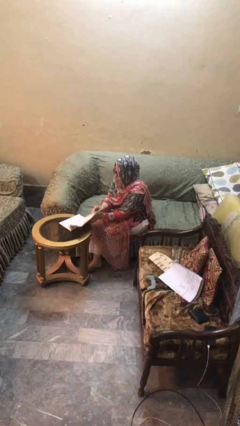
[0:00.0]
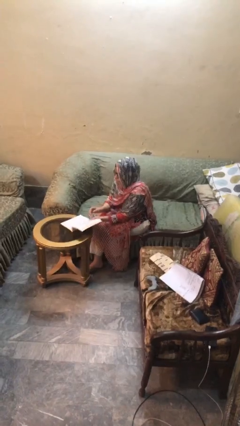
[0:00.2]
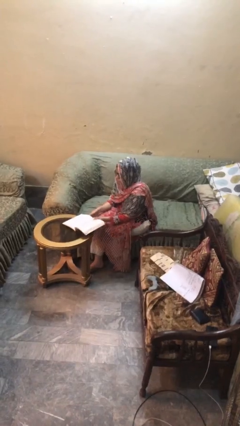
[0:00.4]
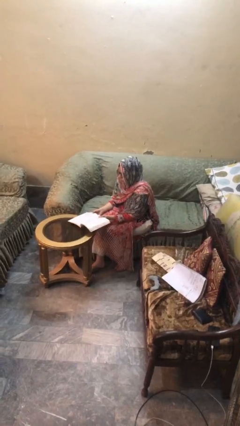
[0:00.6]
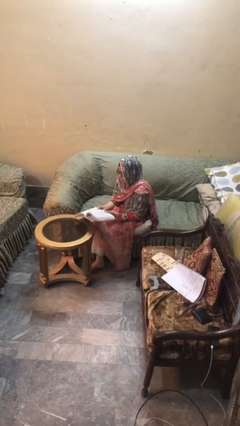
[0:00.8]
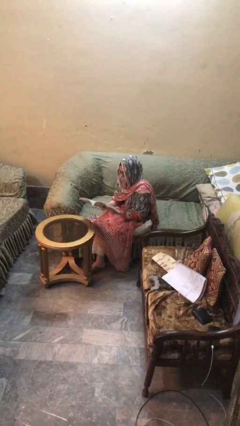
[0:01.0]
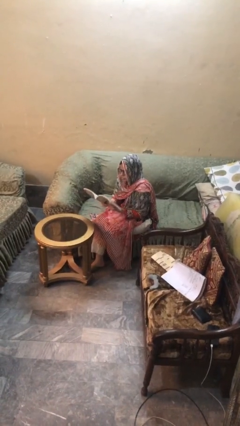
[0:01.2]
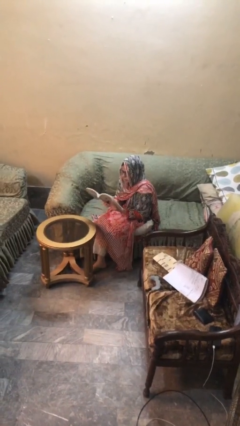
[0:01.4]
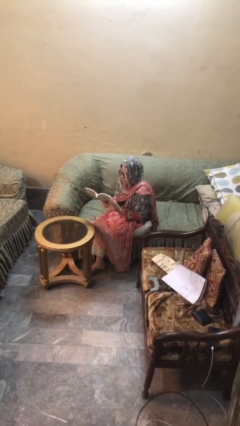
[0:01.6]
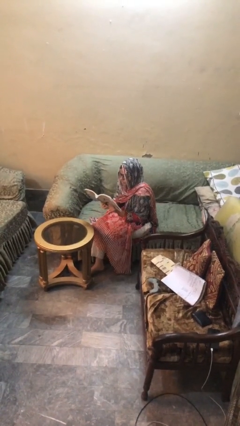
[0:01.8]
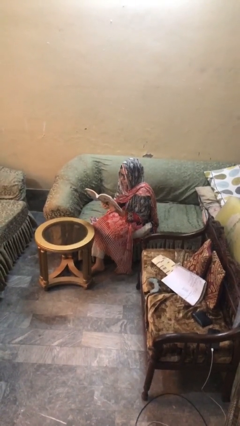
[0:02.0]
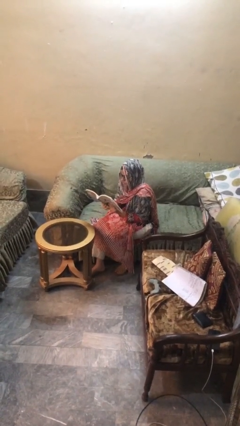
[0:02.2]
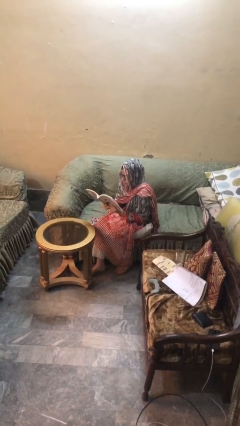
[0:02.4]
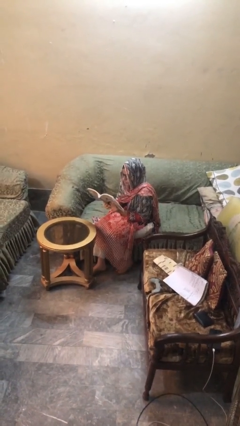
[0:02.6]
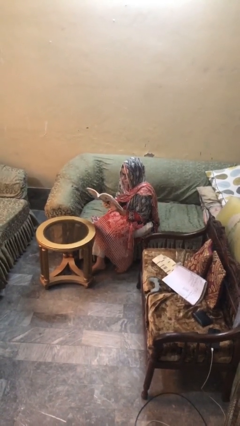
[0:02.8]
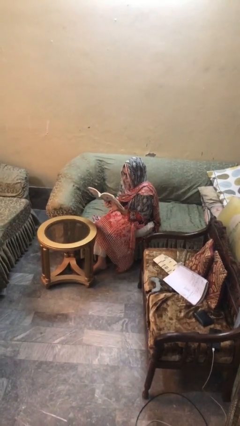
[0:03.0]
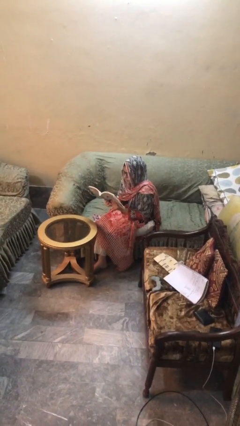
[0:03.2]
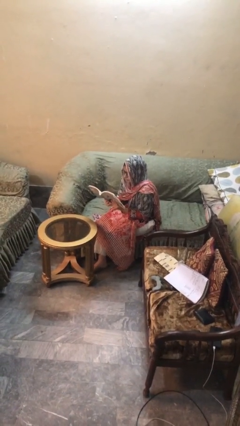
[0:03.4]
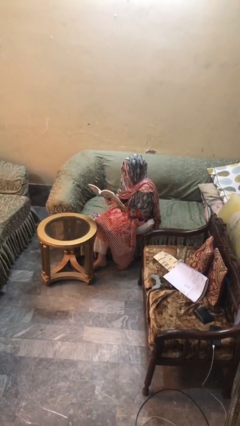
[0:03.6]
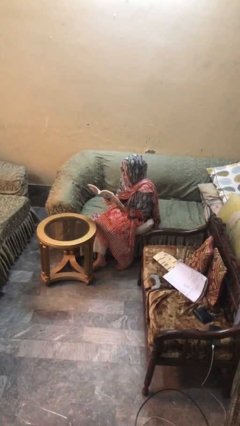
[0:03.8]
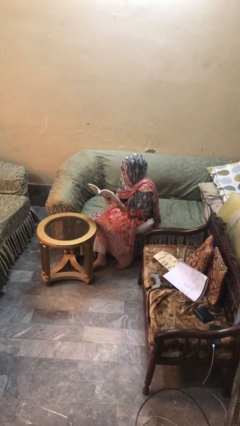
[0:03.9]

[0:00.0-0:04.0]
person reads book

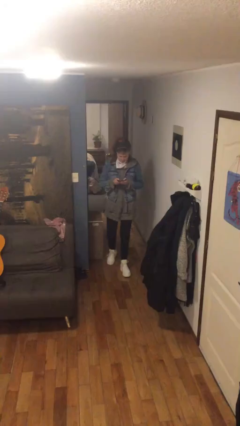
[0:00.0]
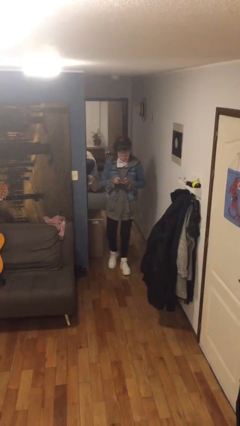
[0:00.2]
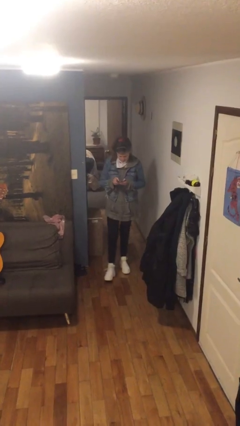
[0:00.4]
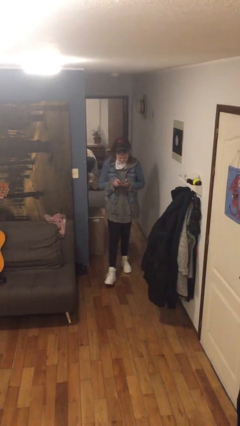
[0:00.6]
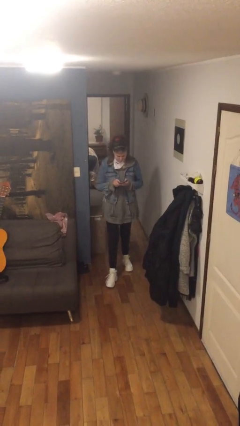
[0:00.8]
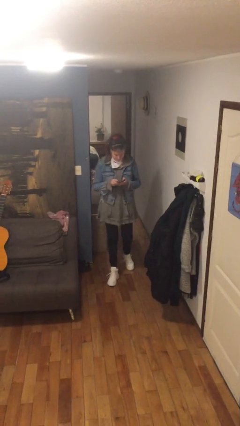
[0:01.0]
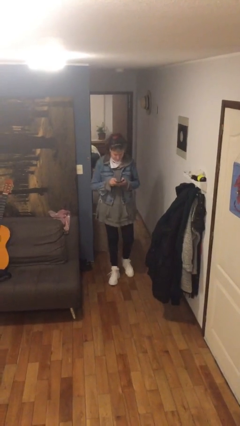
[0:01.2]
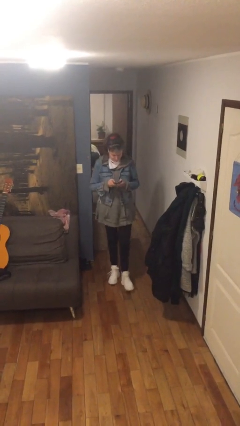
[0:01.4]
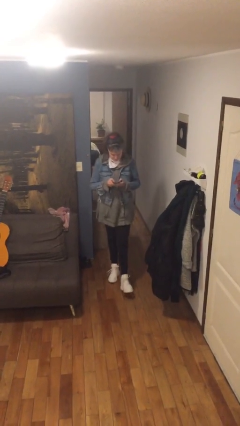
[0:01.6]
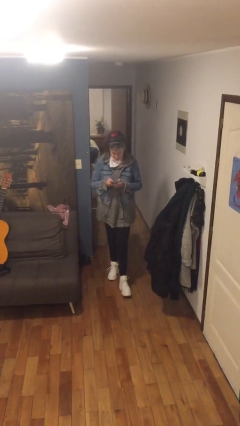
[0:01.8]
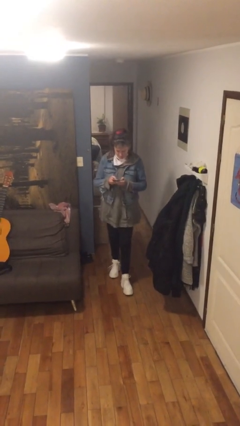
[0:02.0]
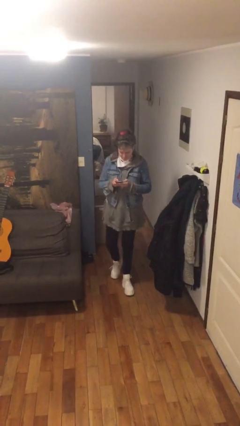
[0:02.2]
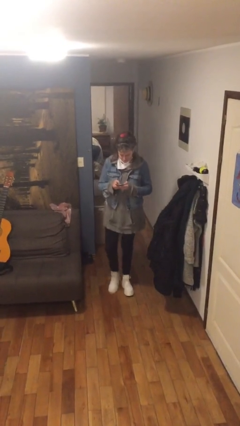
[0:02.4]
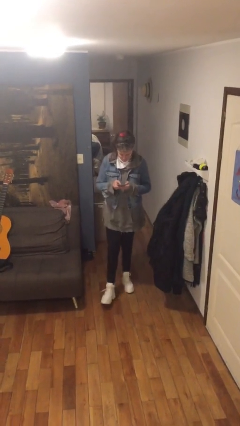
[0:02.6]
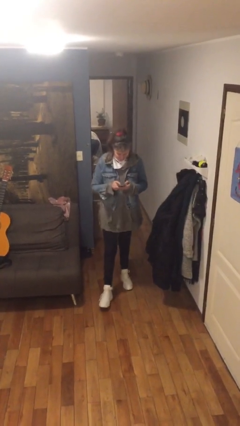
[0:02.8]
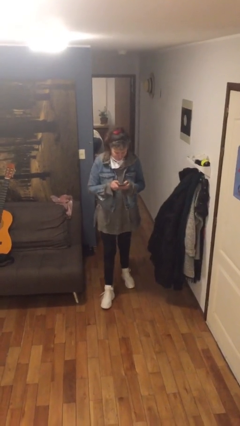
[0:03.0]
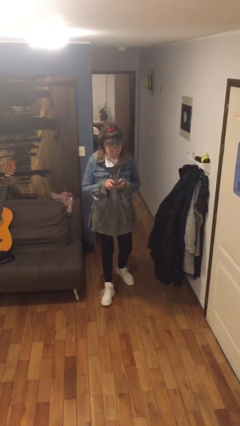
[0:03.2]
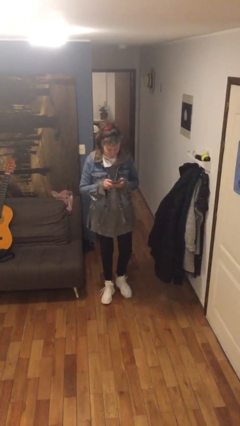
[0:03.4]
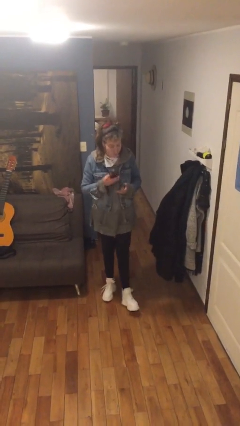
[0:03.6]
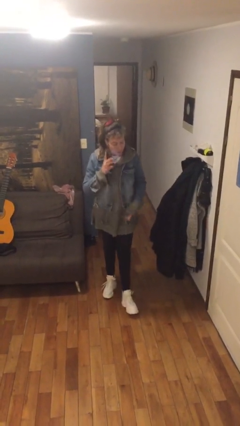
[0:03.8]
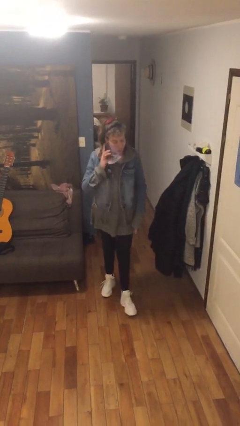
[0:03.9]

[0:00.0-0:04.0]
person texts on phone

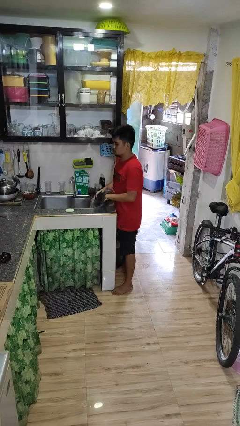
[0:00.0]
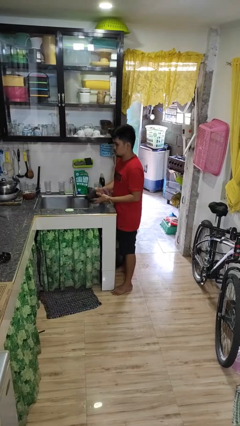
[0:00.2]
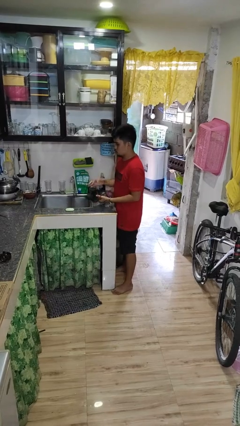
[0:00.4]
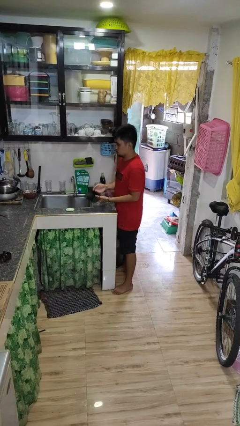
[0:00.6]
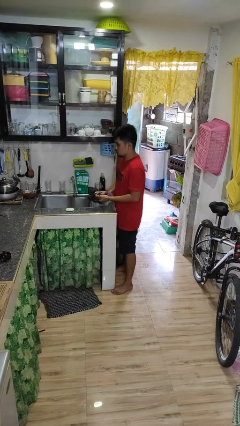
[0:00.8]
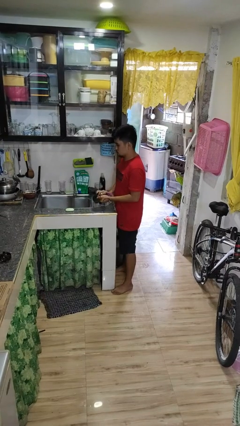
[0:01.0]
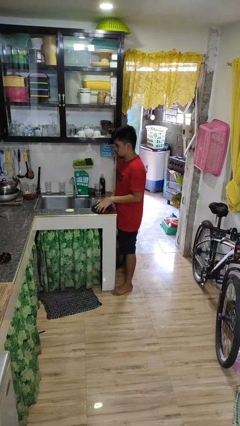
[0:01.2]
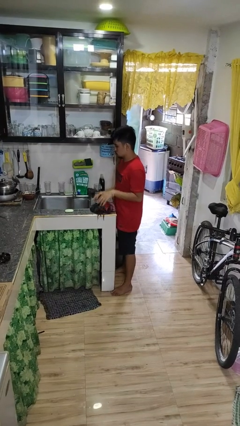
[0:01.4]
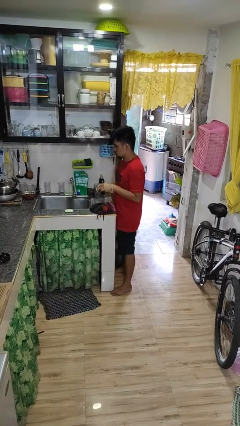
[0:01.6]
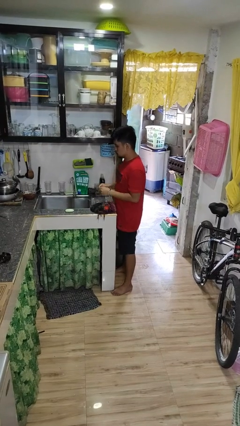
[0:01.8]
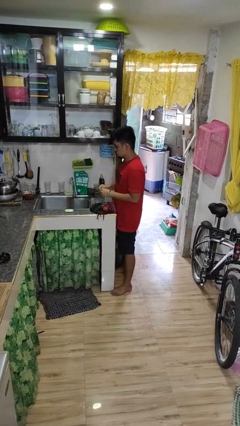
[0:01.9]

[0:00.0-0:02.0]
person dries hands with towel

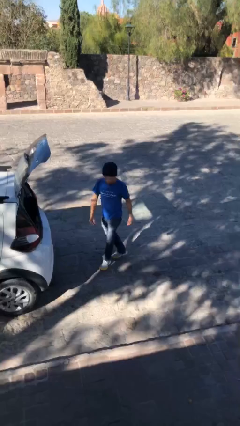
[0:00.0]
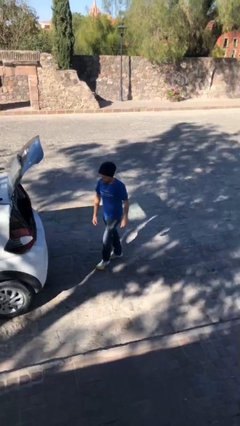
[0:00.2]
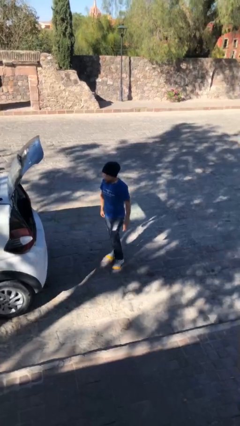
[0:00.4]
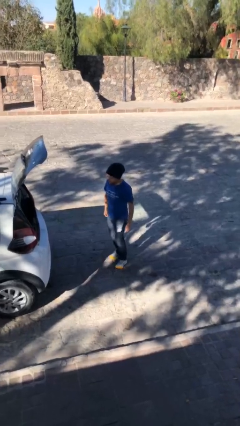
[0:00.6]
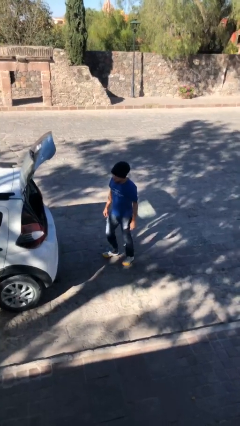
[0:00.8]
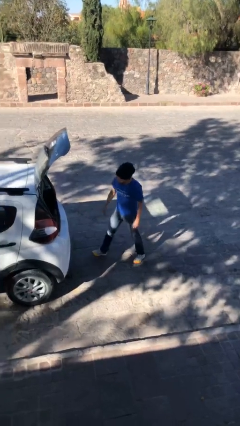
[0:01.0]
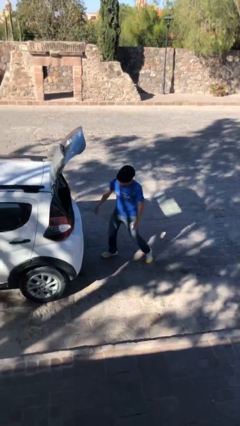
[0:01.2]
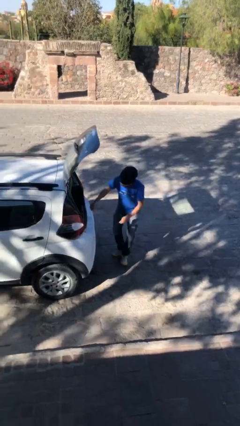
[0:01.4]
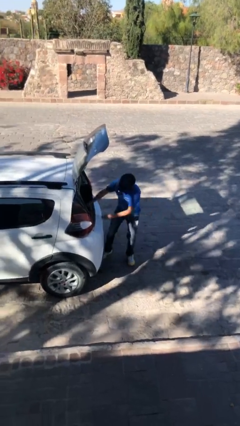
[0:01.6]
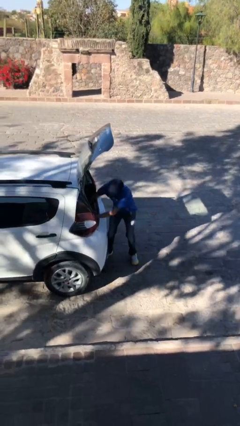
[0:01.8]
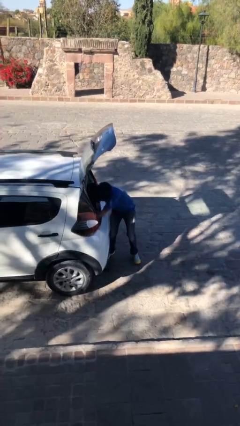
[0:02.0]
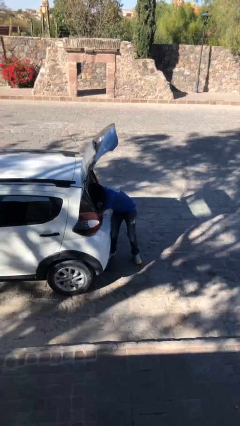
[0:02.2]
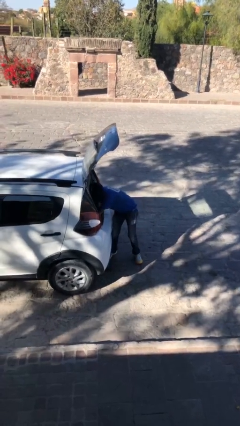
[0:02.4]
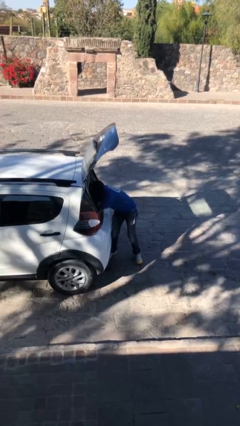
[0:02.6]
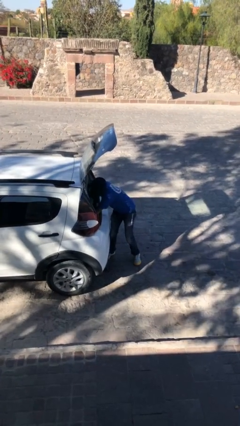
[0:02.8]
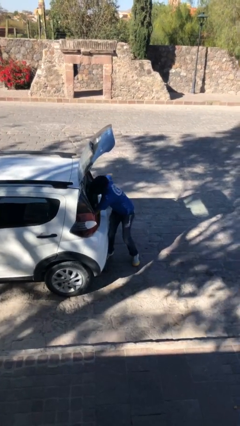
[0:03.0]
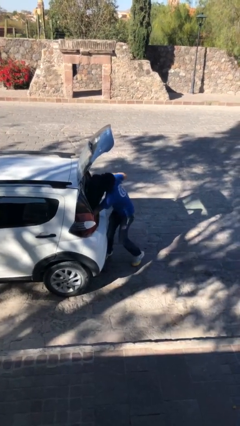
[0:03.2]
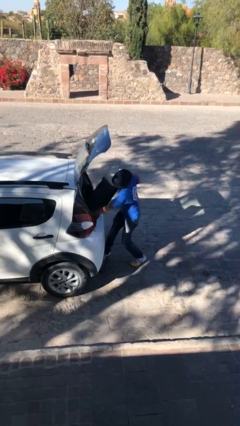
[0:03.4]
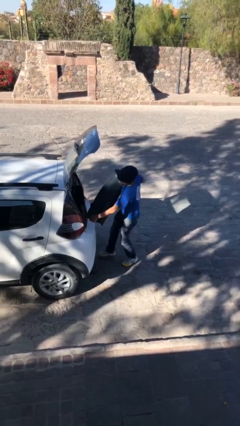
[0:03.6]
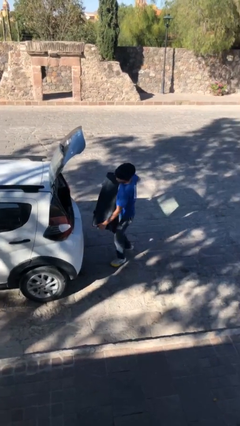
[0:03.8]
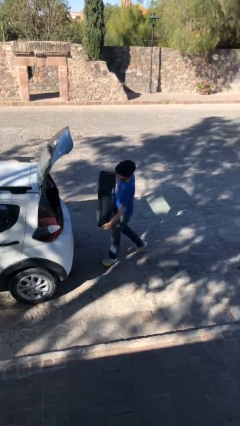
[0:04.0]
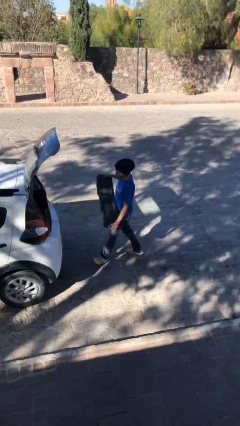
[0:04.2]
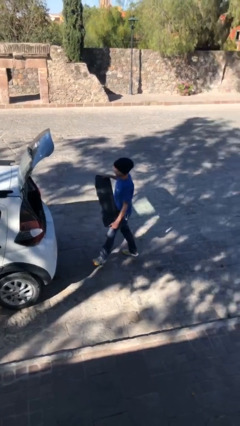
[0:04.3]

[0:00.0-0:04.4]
person unloads car

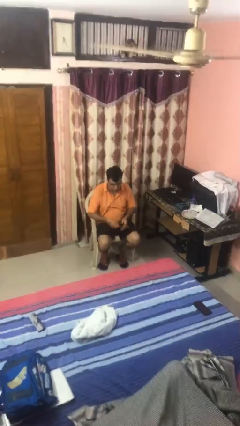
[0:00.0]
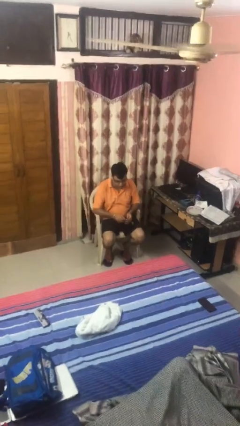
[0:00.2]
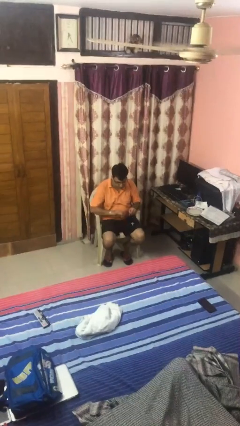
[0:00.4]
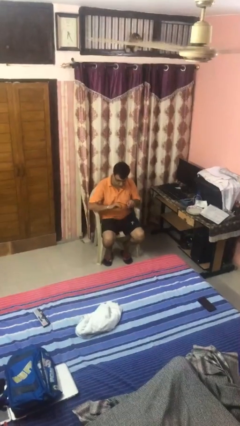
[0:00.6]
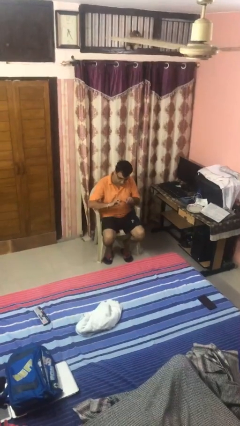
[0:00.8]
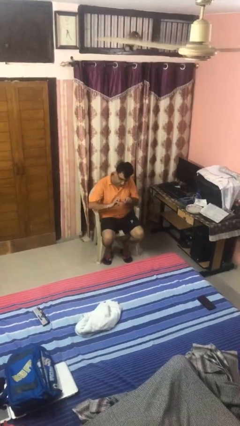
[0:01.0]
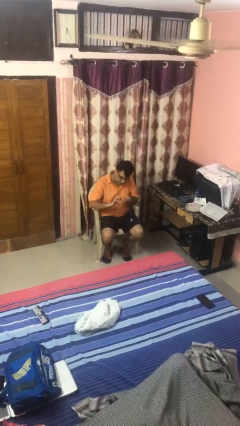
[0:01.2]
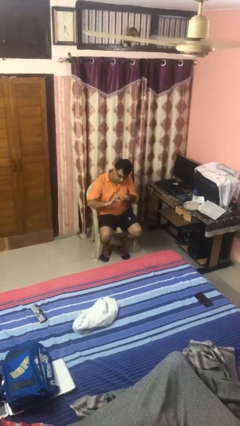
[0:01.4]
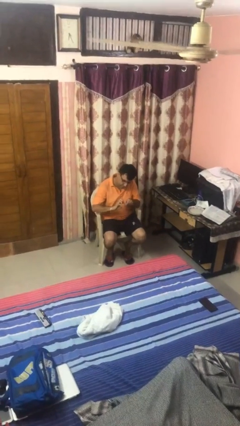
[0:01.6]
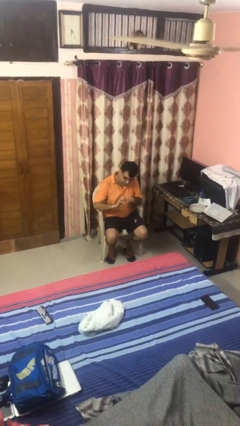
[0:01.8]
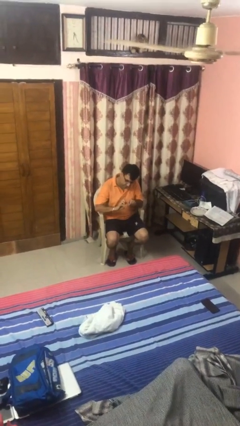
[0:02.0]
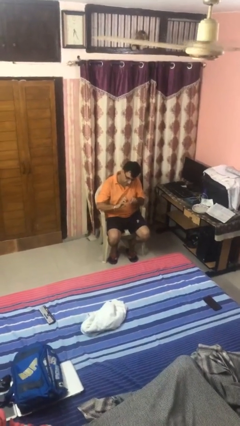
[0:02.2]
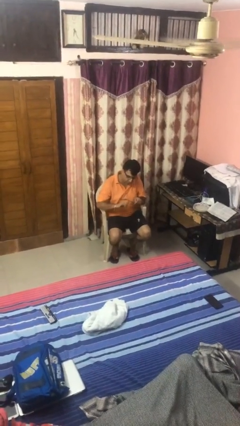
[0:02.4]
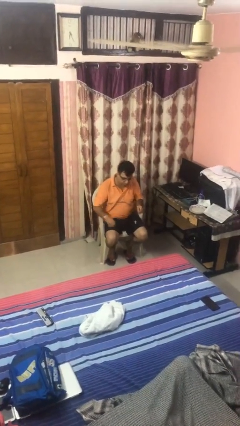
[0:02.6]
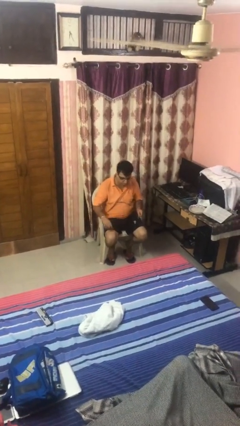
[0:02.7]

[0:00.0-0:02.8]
person files fingernails

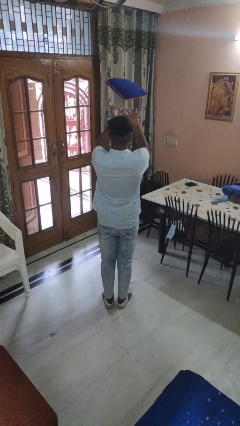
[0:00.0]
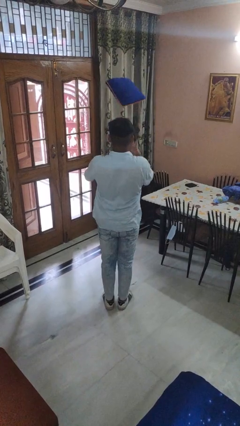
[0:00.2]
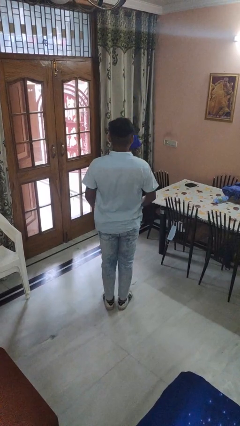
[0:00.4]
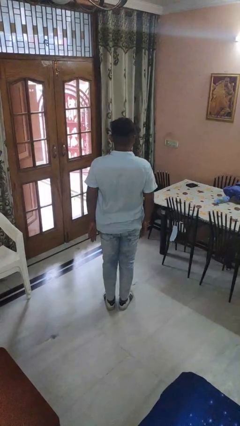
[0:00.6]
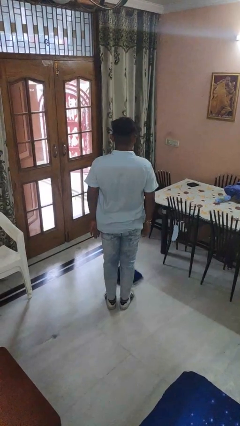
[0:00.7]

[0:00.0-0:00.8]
person throws object into air
